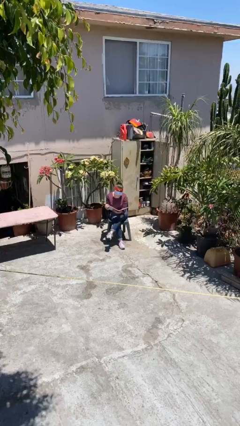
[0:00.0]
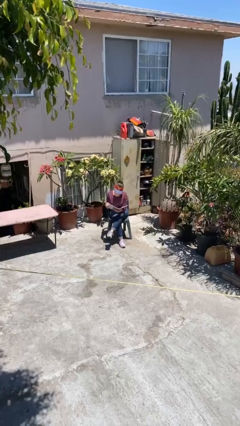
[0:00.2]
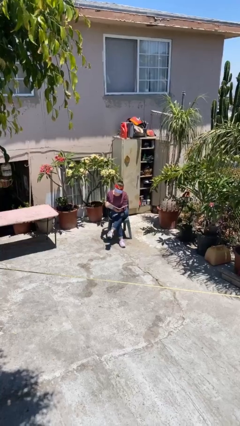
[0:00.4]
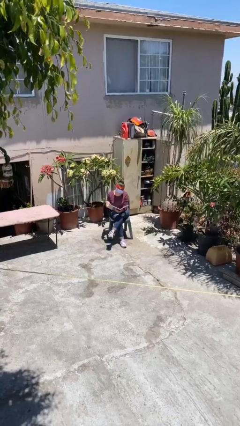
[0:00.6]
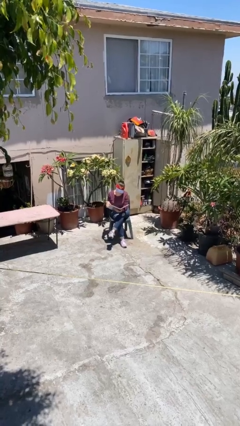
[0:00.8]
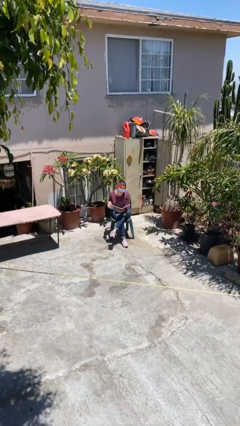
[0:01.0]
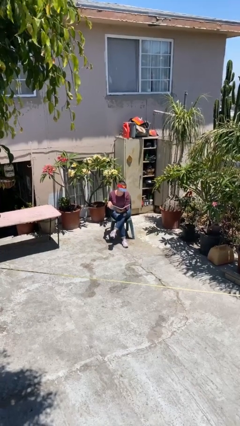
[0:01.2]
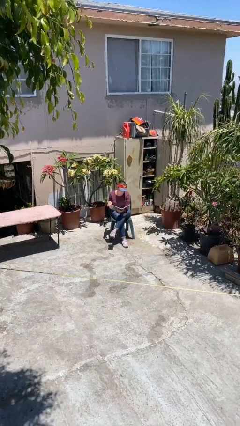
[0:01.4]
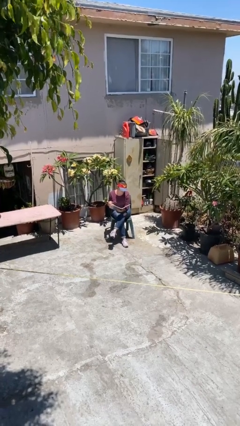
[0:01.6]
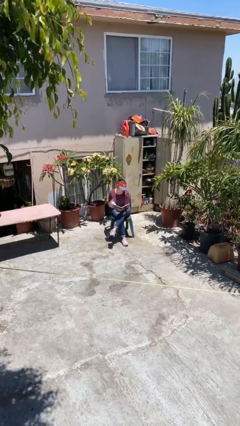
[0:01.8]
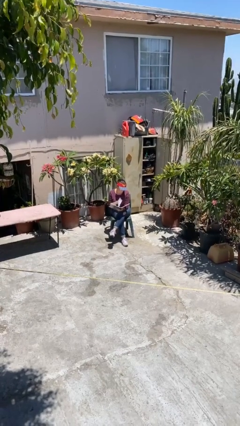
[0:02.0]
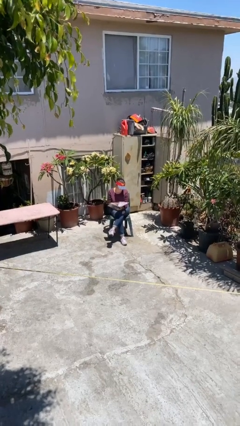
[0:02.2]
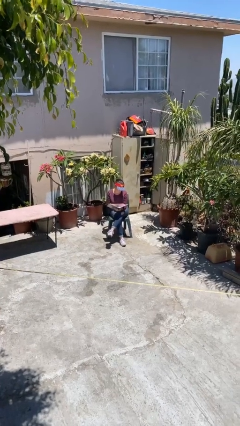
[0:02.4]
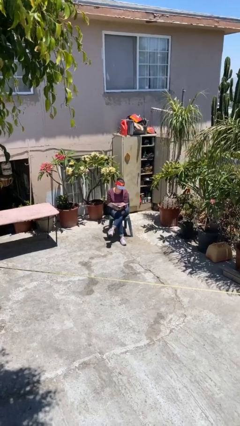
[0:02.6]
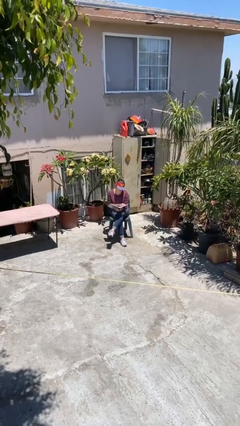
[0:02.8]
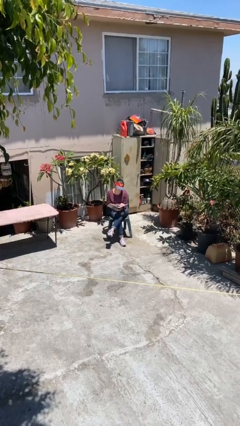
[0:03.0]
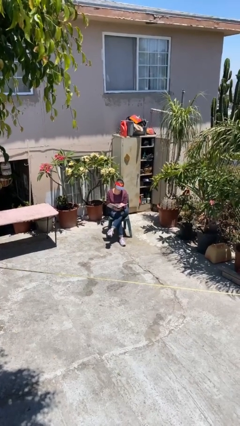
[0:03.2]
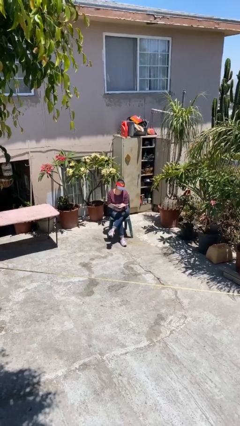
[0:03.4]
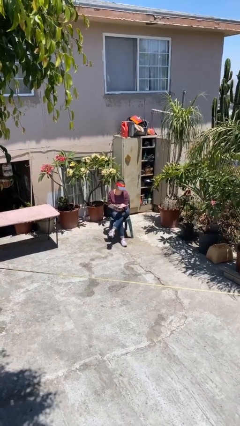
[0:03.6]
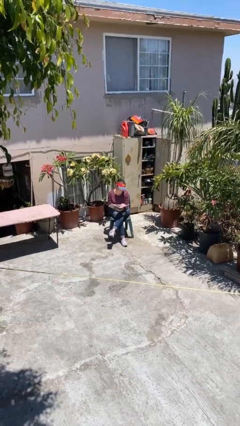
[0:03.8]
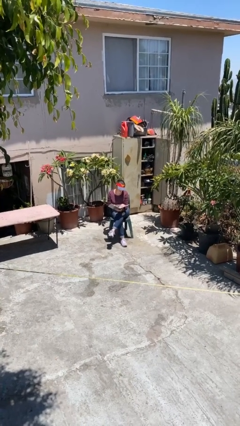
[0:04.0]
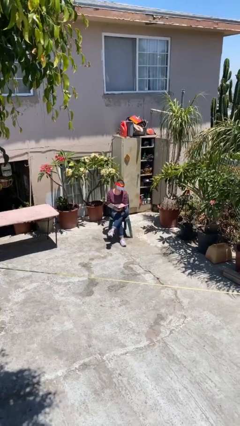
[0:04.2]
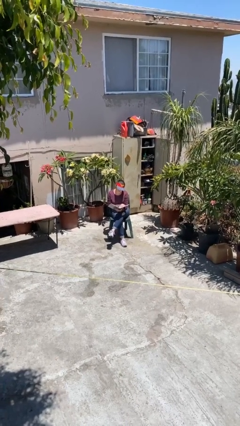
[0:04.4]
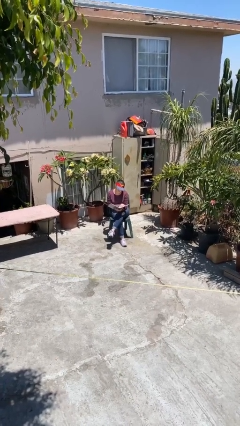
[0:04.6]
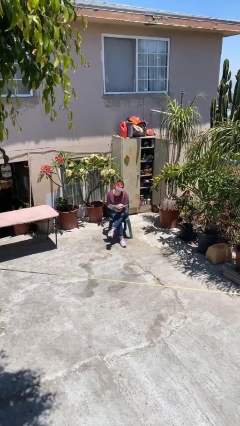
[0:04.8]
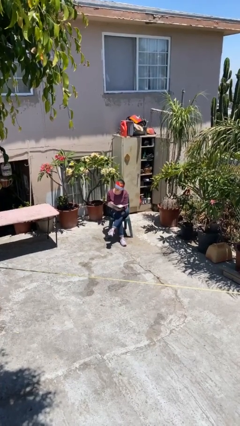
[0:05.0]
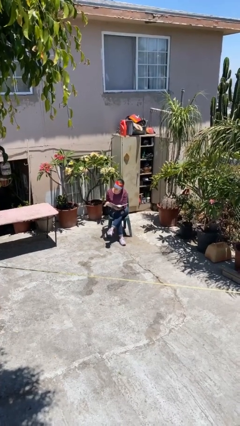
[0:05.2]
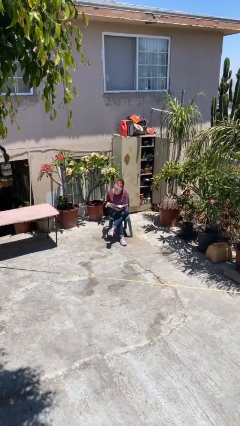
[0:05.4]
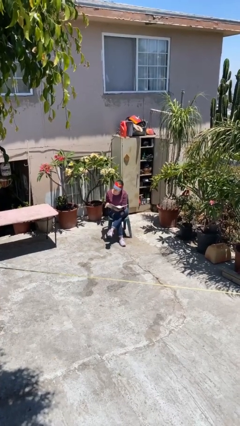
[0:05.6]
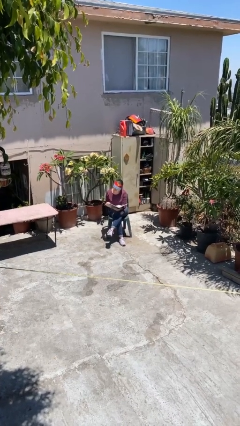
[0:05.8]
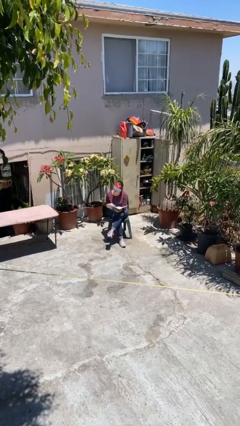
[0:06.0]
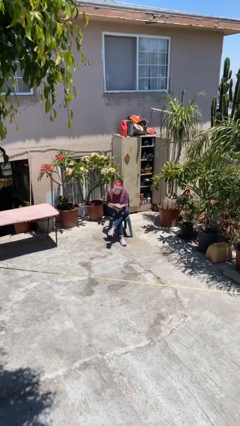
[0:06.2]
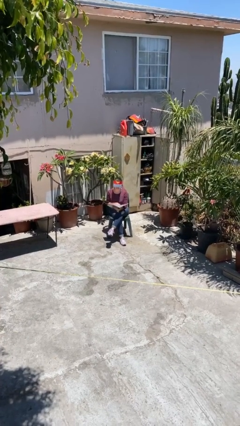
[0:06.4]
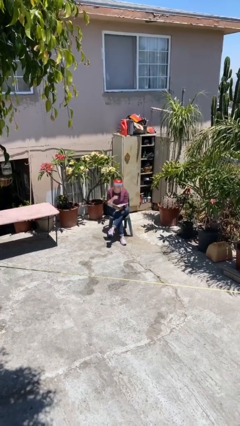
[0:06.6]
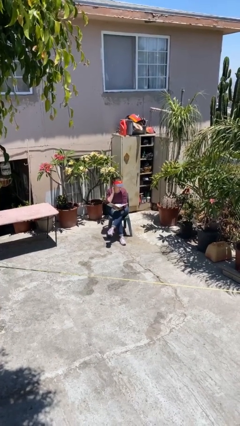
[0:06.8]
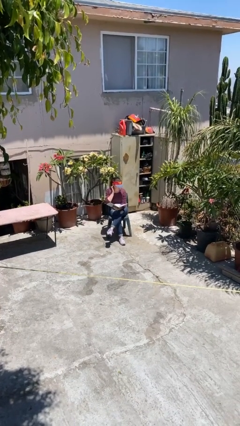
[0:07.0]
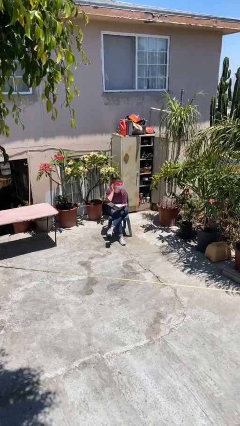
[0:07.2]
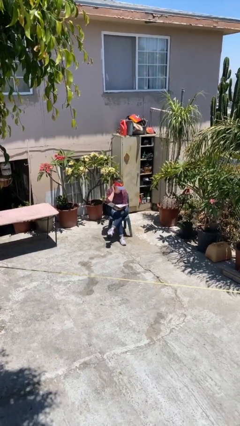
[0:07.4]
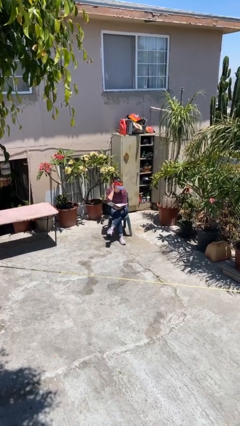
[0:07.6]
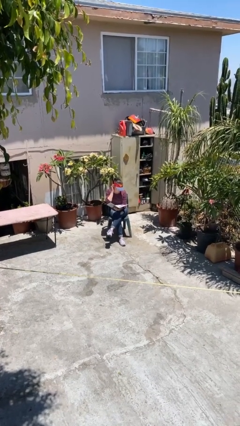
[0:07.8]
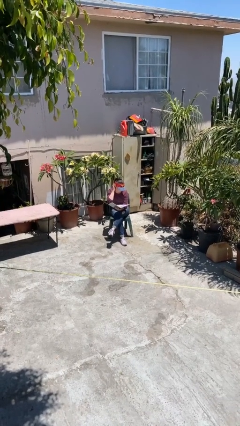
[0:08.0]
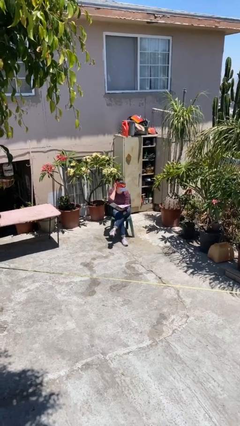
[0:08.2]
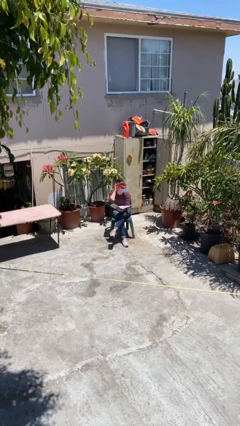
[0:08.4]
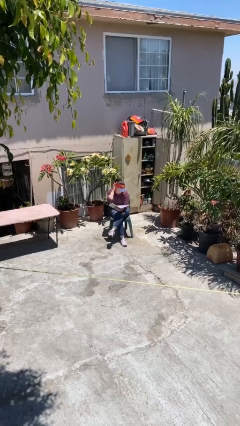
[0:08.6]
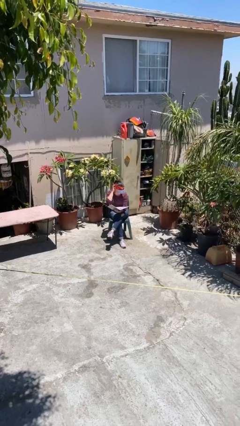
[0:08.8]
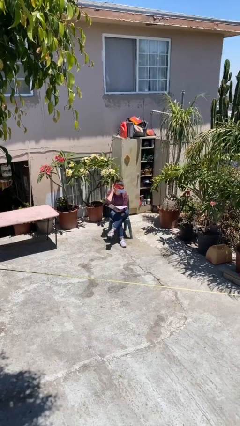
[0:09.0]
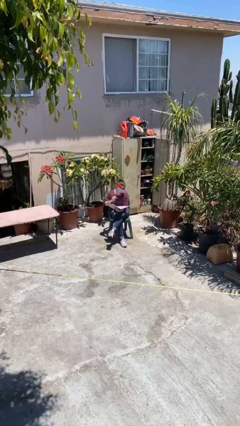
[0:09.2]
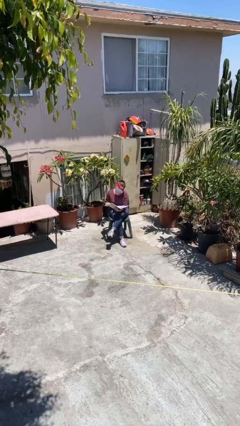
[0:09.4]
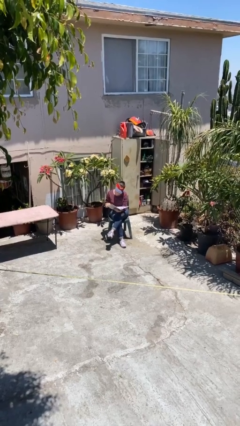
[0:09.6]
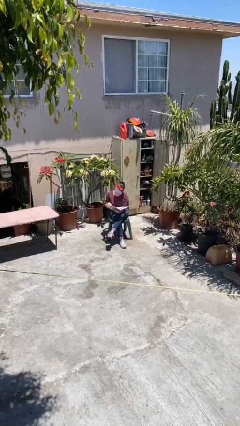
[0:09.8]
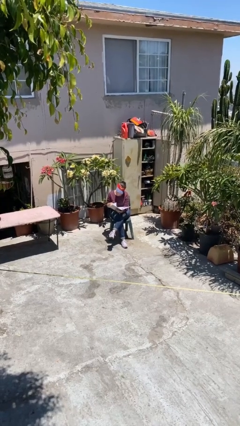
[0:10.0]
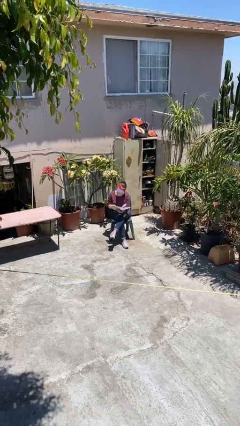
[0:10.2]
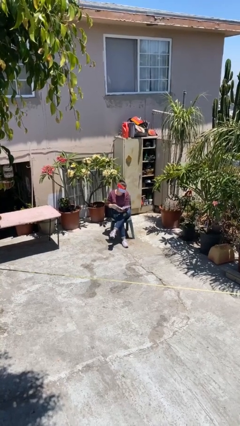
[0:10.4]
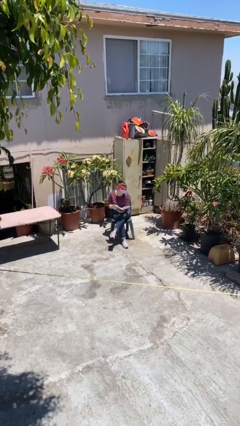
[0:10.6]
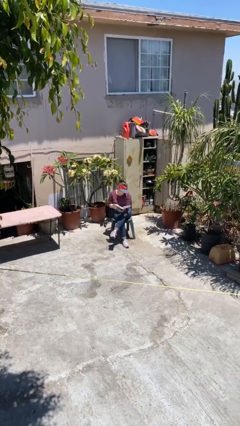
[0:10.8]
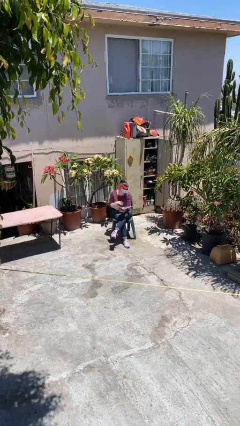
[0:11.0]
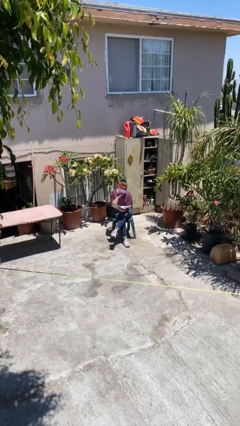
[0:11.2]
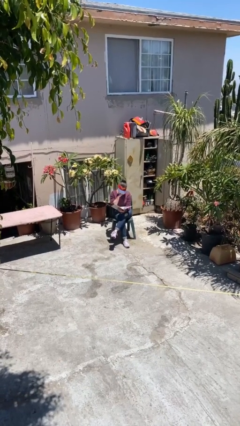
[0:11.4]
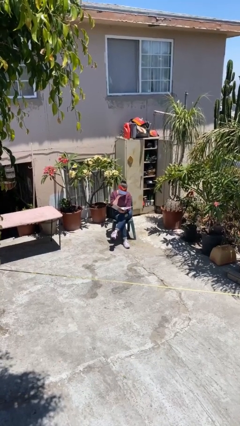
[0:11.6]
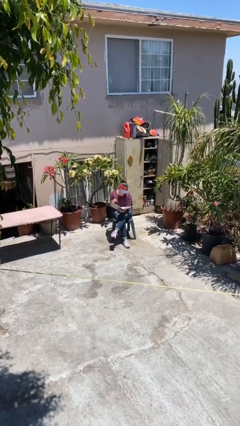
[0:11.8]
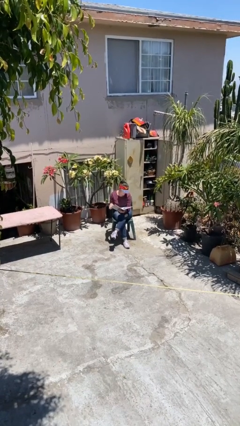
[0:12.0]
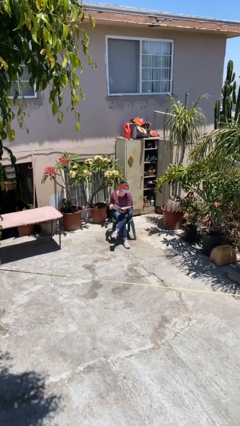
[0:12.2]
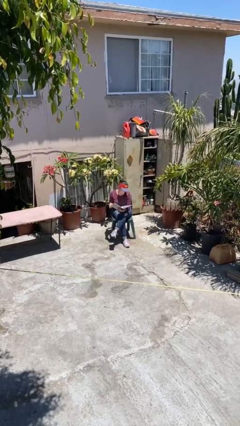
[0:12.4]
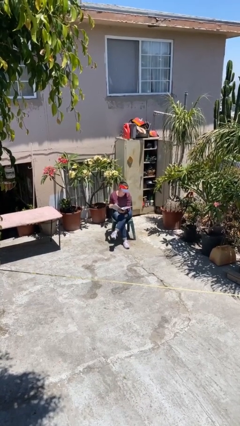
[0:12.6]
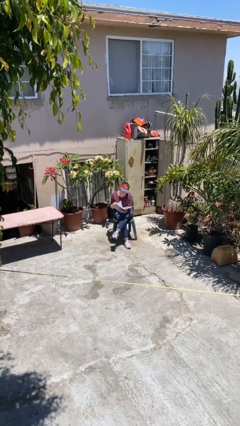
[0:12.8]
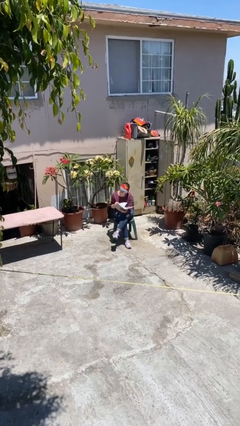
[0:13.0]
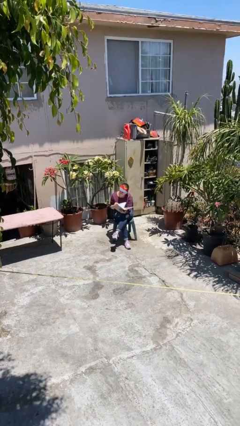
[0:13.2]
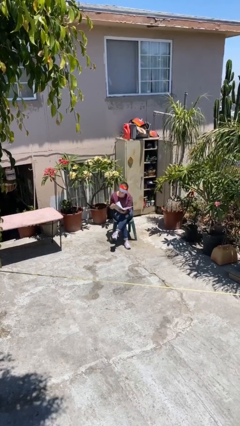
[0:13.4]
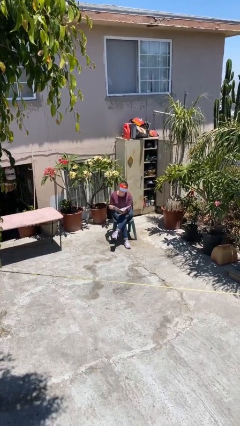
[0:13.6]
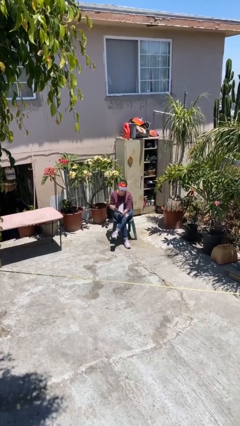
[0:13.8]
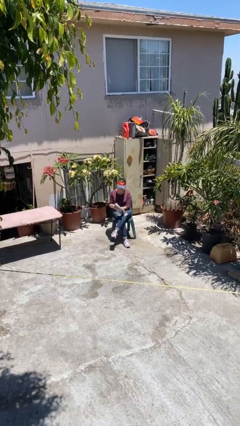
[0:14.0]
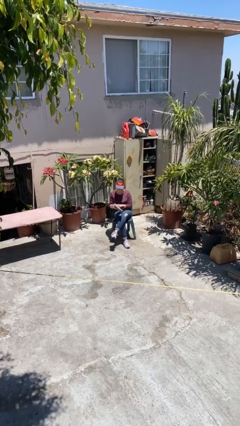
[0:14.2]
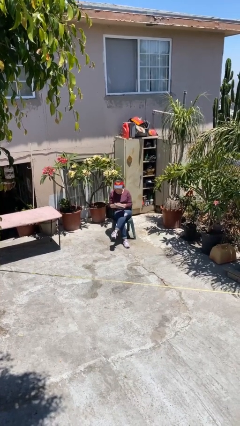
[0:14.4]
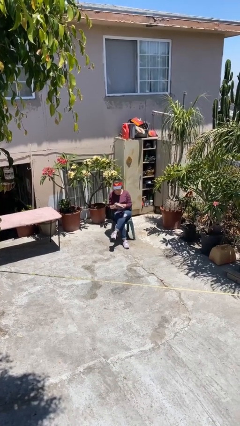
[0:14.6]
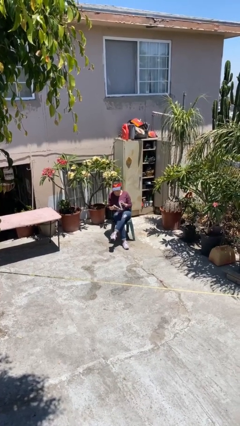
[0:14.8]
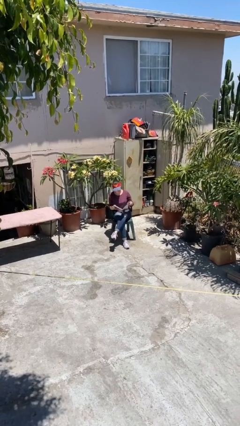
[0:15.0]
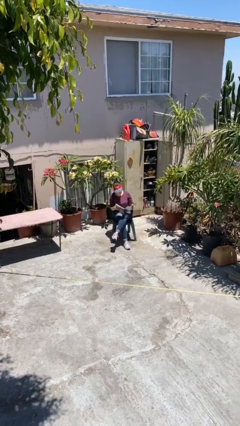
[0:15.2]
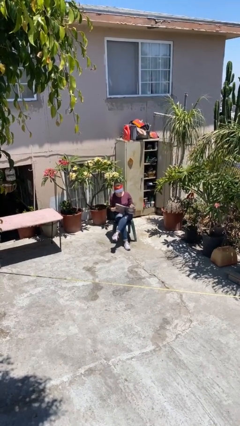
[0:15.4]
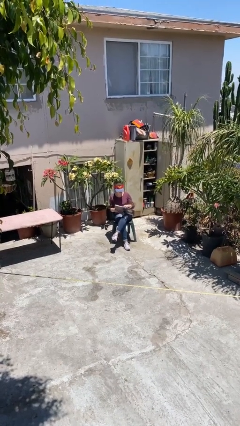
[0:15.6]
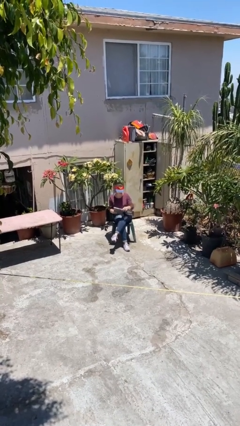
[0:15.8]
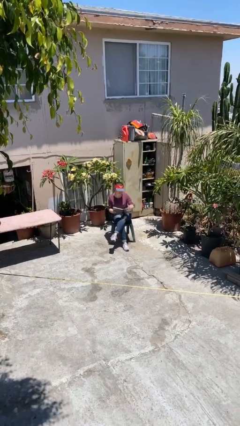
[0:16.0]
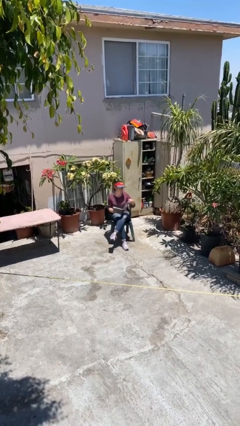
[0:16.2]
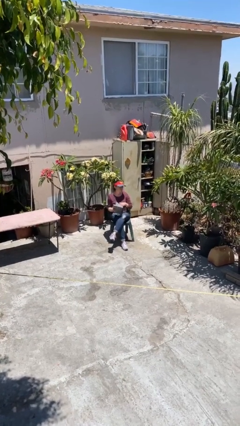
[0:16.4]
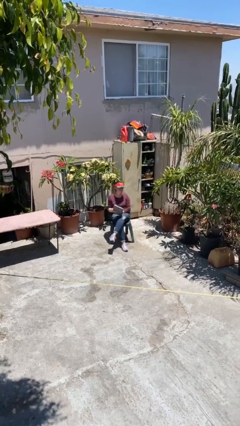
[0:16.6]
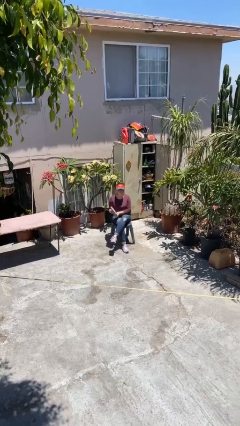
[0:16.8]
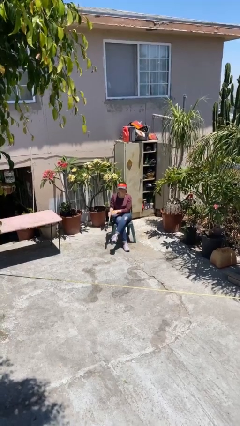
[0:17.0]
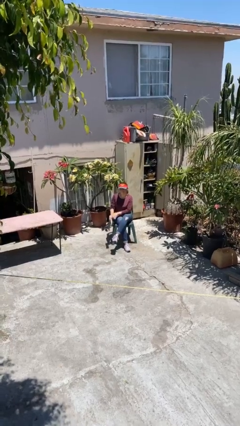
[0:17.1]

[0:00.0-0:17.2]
person reads document

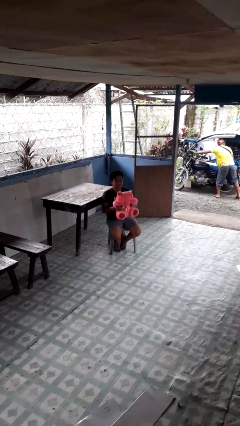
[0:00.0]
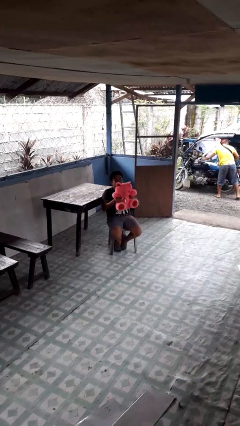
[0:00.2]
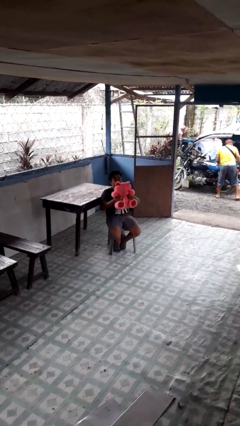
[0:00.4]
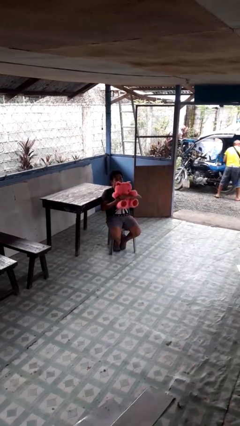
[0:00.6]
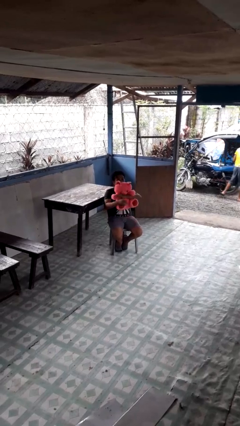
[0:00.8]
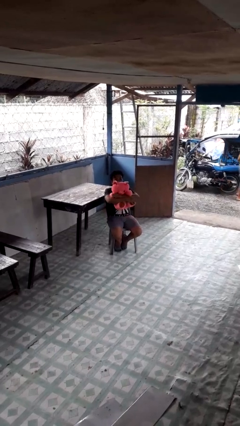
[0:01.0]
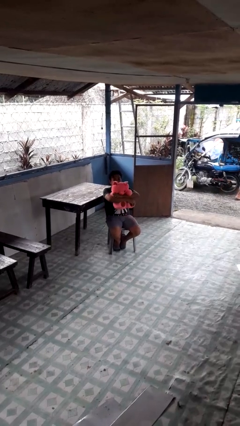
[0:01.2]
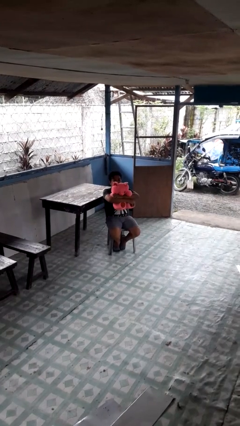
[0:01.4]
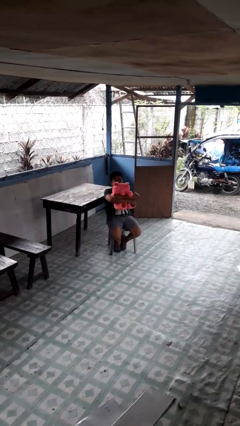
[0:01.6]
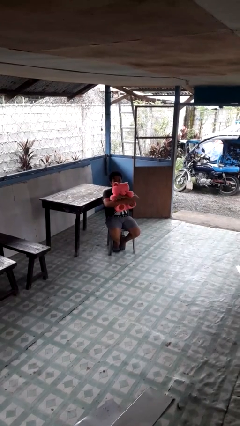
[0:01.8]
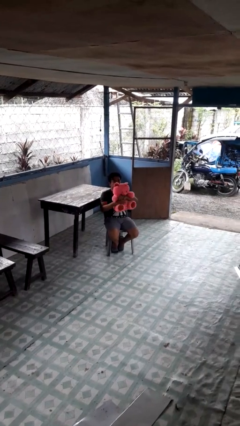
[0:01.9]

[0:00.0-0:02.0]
person hugs stuffed animal
